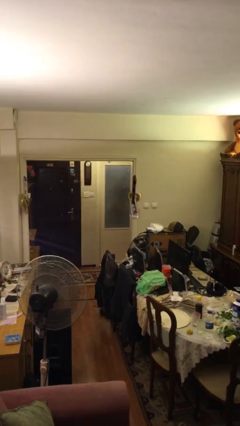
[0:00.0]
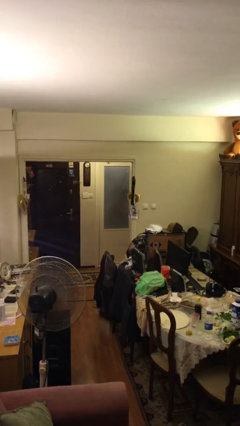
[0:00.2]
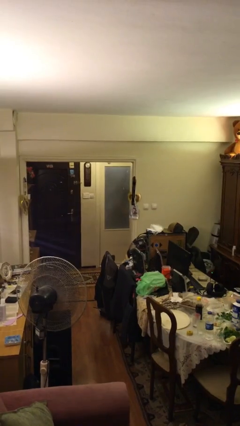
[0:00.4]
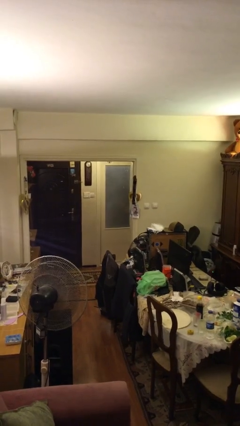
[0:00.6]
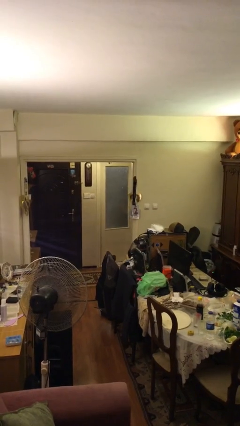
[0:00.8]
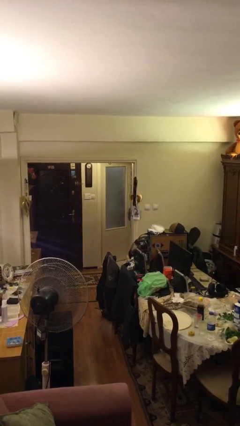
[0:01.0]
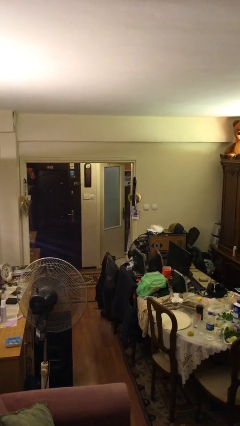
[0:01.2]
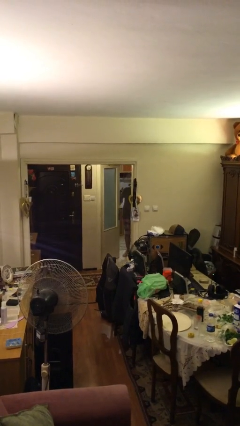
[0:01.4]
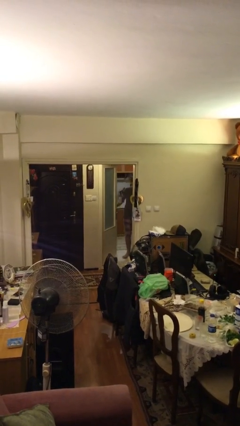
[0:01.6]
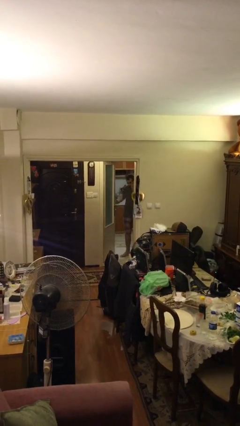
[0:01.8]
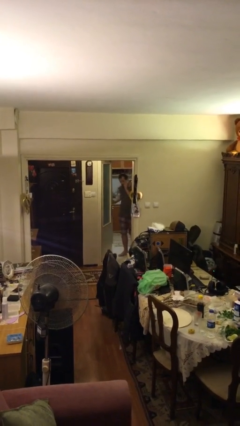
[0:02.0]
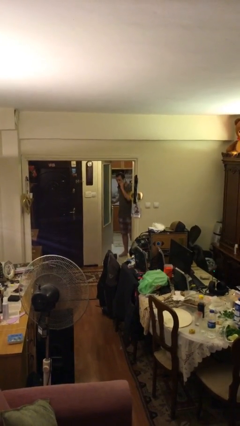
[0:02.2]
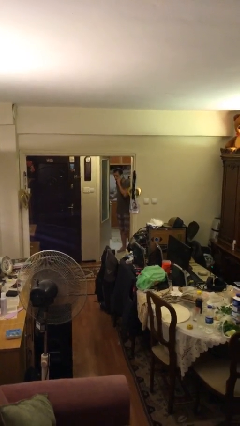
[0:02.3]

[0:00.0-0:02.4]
person opens facility door

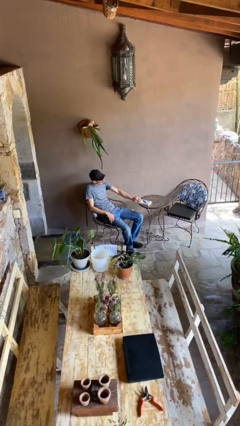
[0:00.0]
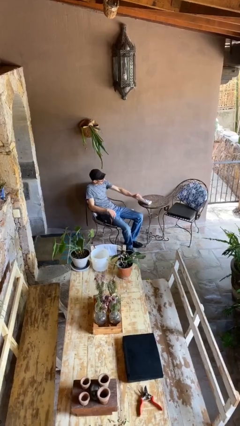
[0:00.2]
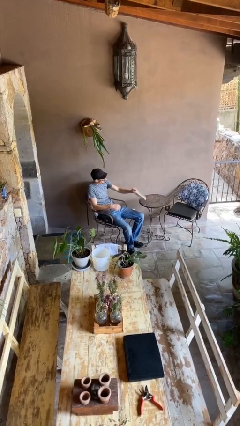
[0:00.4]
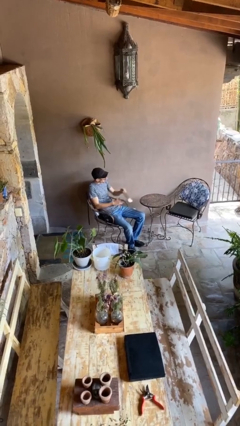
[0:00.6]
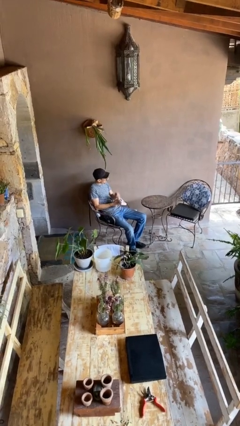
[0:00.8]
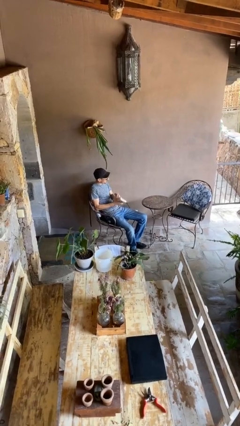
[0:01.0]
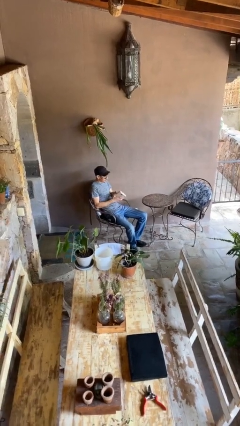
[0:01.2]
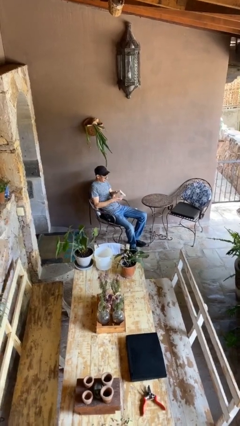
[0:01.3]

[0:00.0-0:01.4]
person picks up object from table

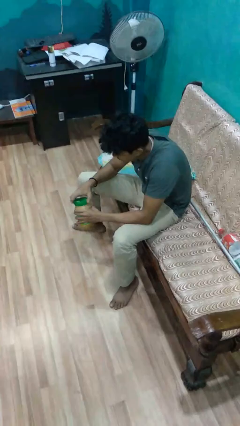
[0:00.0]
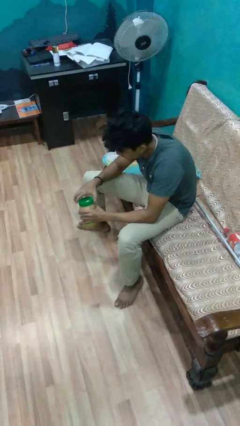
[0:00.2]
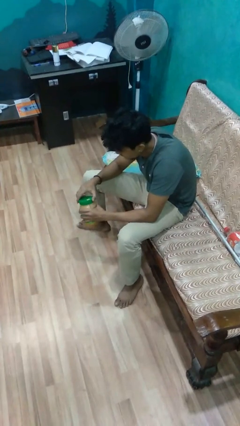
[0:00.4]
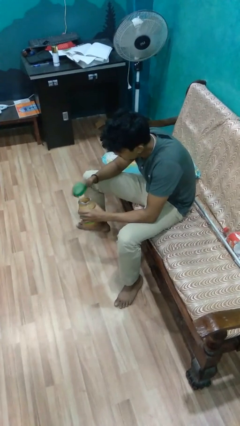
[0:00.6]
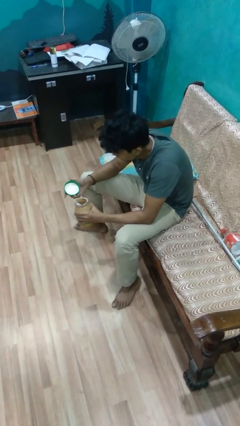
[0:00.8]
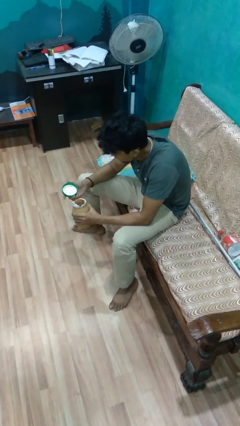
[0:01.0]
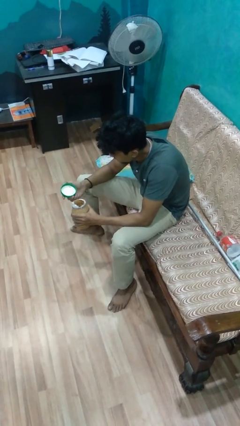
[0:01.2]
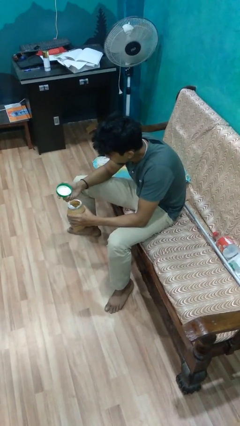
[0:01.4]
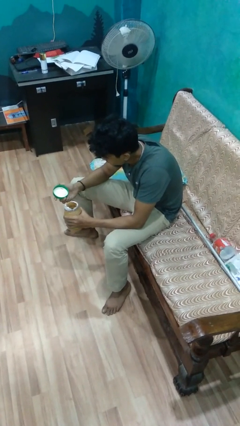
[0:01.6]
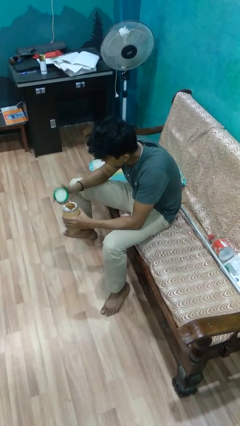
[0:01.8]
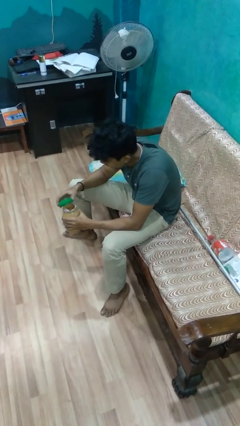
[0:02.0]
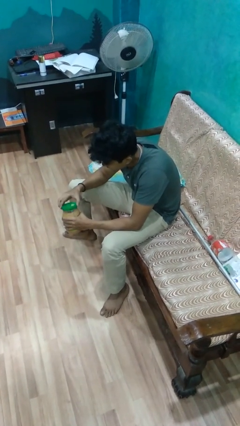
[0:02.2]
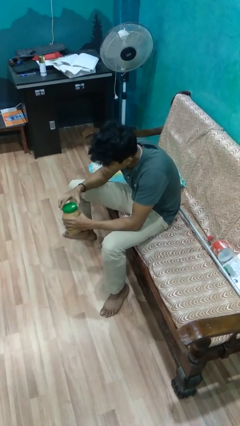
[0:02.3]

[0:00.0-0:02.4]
person opens jar

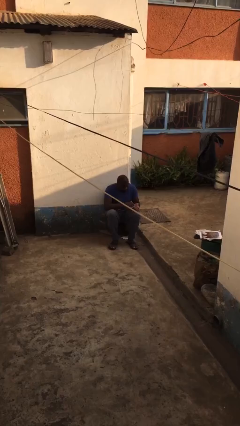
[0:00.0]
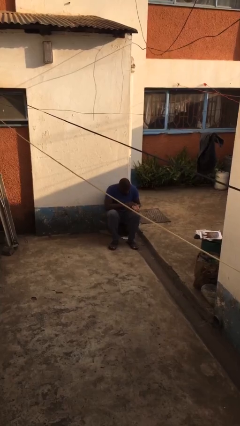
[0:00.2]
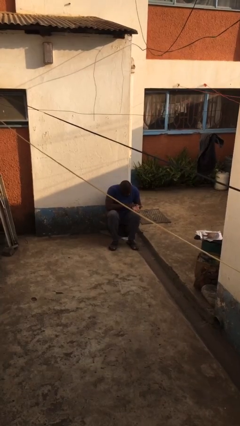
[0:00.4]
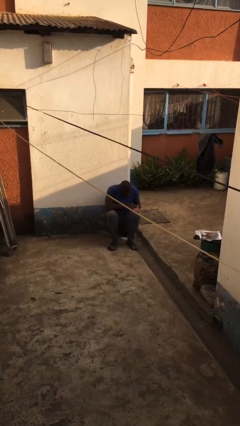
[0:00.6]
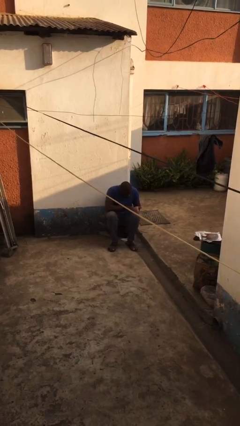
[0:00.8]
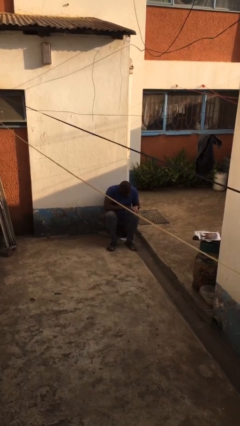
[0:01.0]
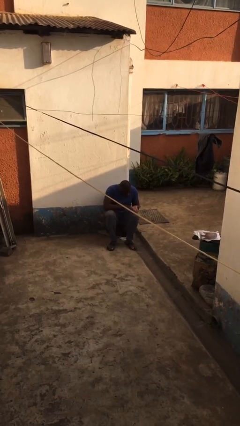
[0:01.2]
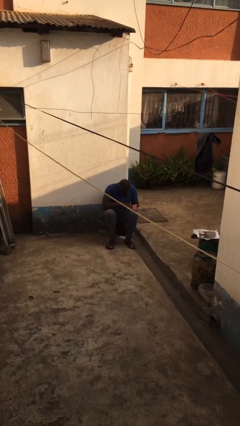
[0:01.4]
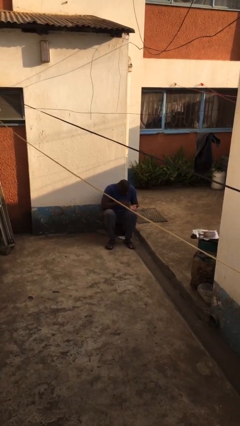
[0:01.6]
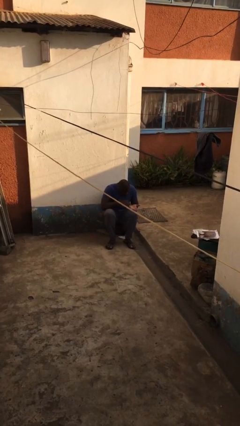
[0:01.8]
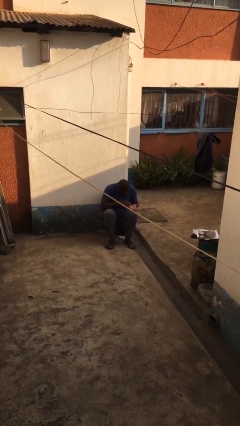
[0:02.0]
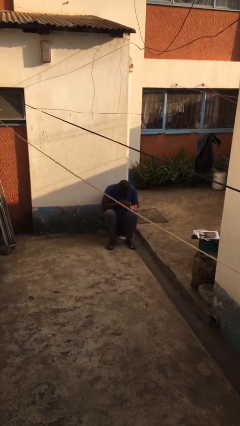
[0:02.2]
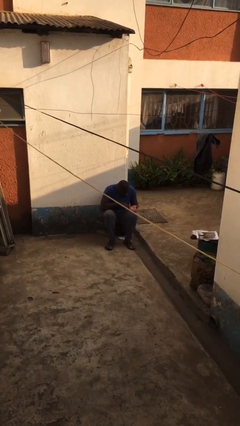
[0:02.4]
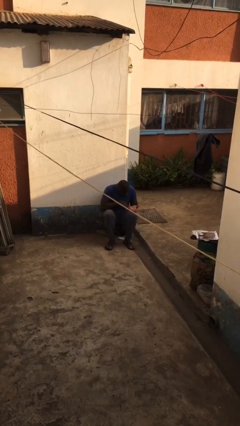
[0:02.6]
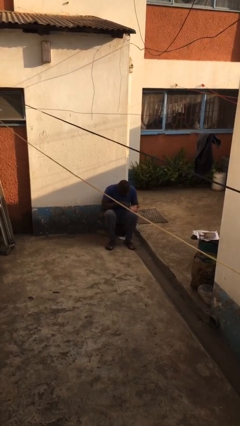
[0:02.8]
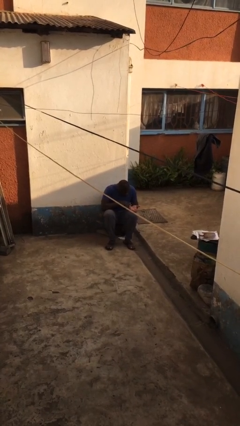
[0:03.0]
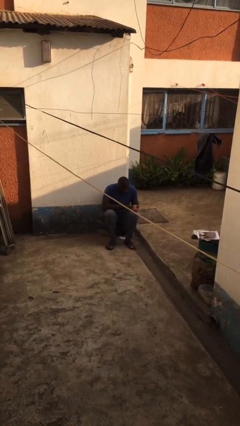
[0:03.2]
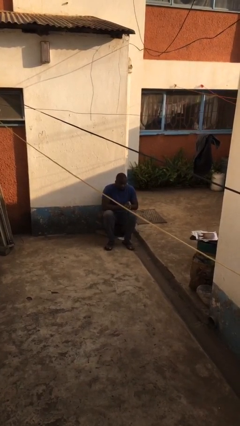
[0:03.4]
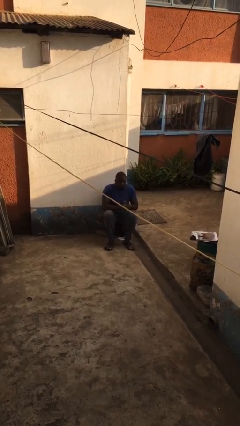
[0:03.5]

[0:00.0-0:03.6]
person looks at hands in lap

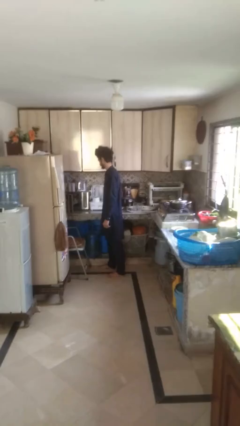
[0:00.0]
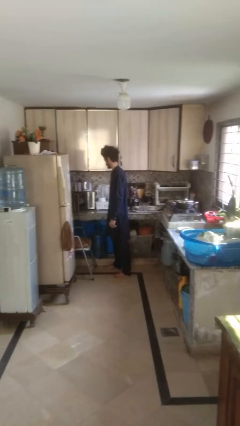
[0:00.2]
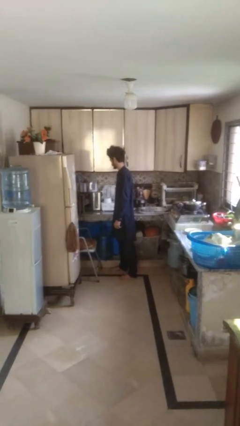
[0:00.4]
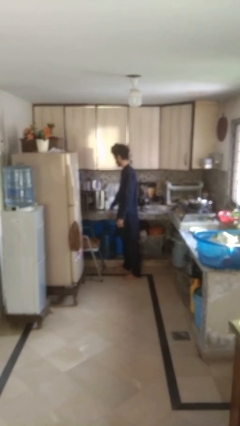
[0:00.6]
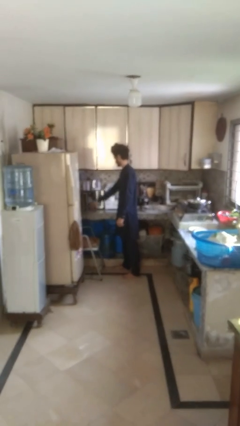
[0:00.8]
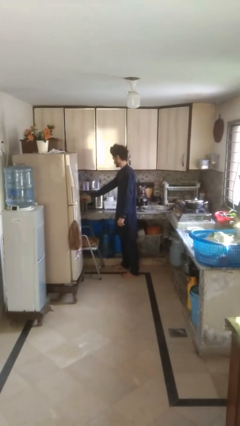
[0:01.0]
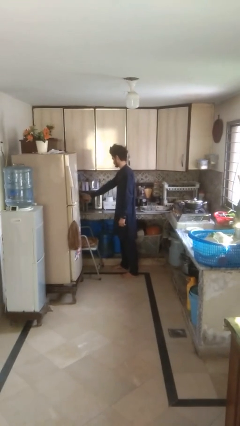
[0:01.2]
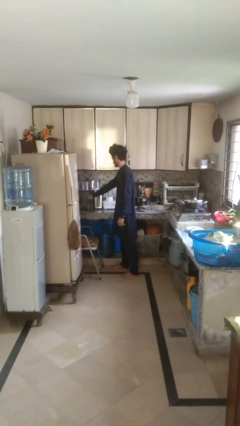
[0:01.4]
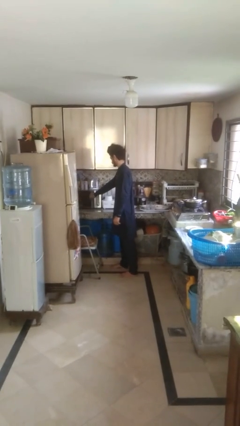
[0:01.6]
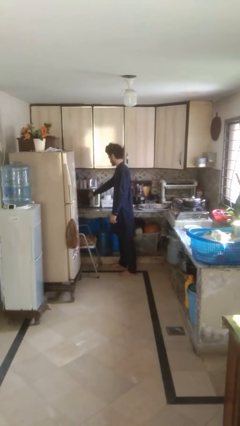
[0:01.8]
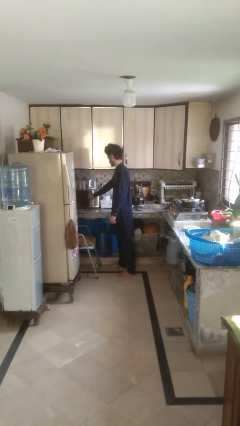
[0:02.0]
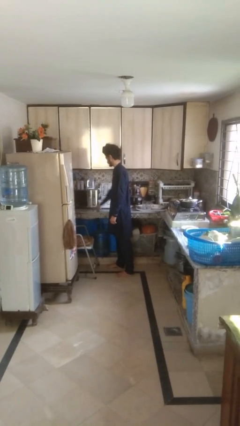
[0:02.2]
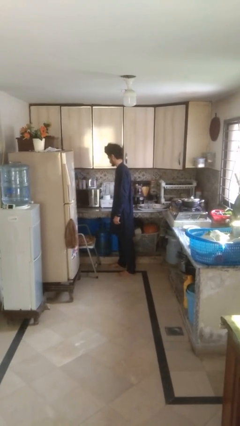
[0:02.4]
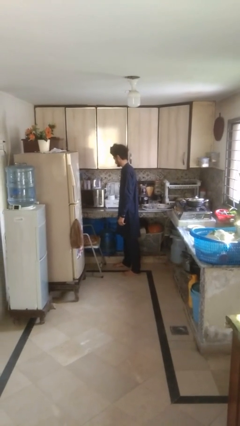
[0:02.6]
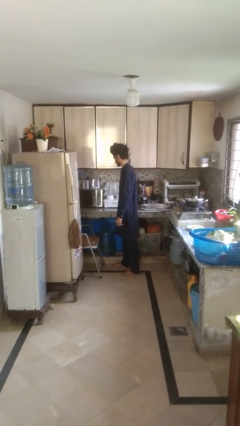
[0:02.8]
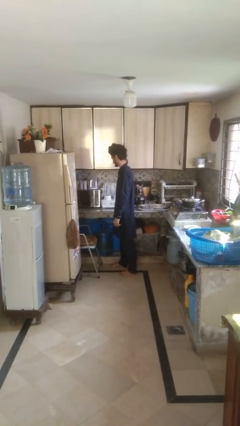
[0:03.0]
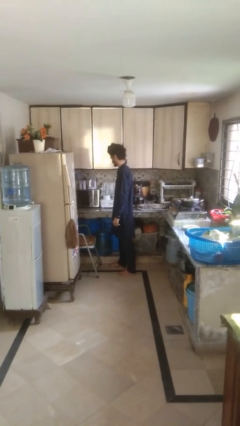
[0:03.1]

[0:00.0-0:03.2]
person closes oven door

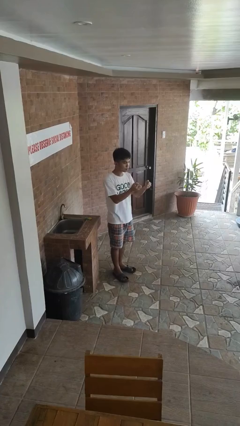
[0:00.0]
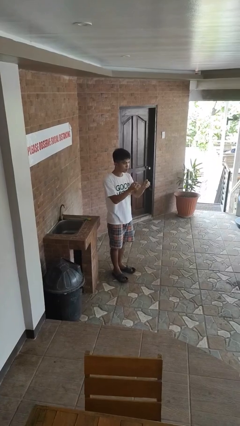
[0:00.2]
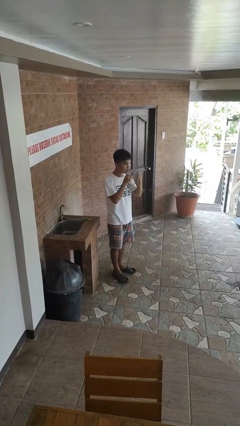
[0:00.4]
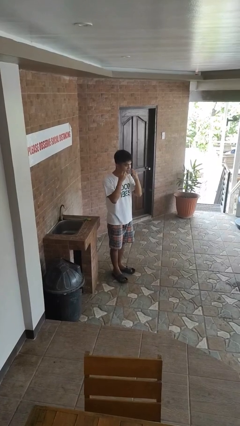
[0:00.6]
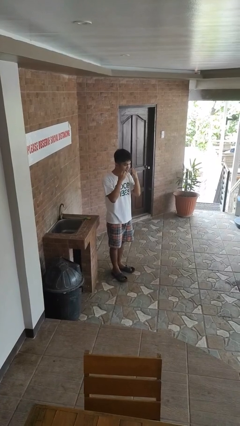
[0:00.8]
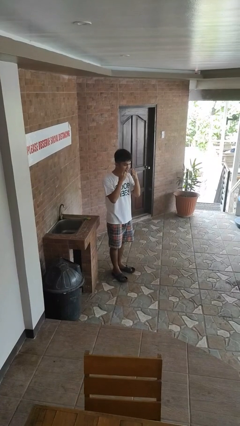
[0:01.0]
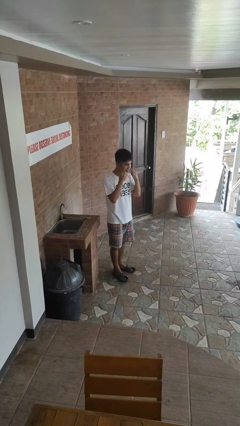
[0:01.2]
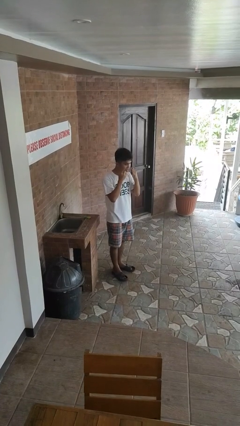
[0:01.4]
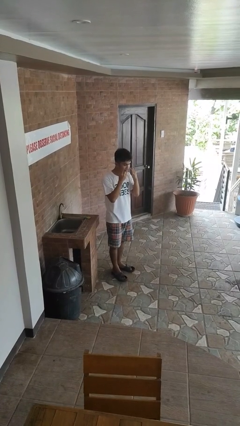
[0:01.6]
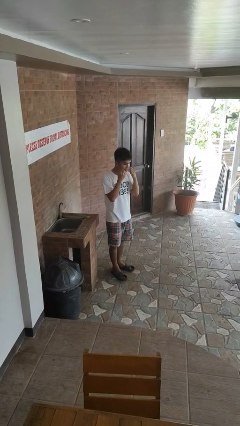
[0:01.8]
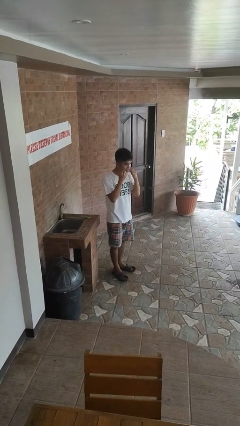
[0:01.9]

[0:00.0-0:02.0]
person flosses

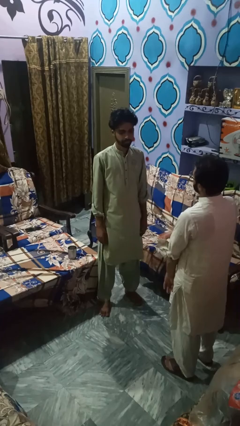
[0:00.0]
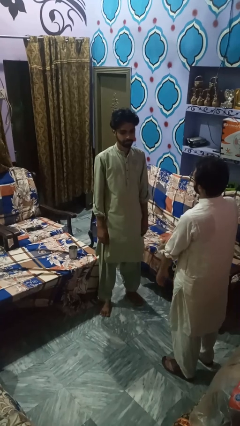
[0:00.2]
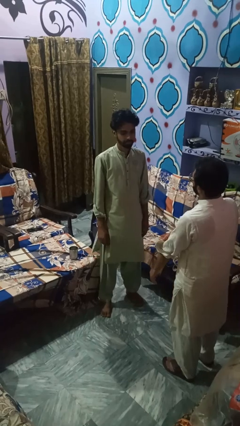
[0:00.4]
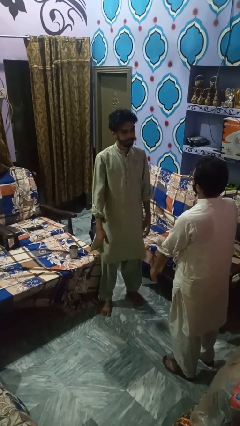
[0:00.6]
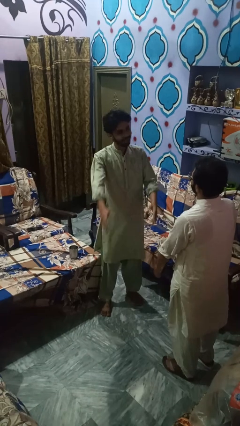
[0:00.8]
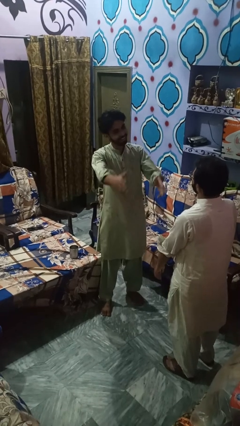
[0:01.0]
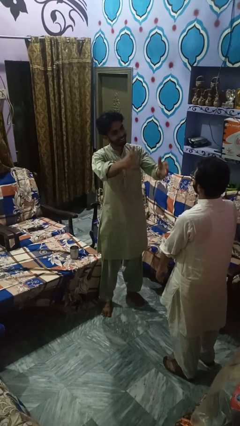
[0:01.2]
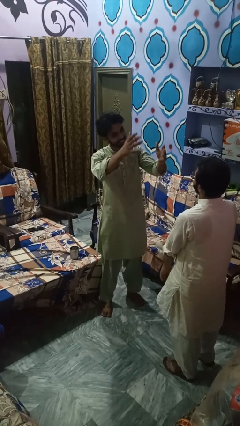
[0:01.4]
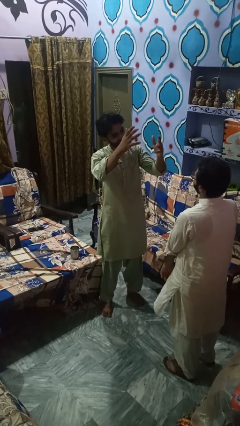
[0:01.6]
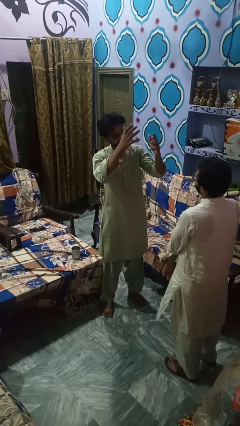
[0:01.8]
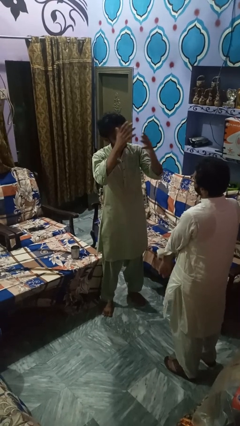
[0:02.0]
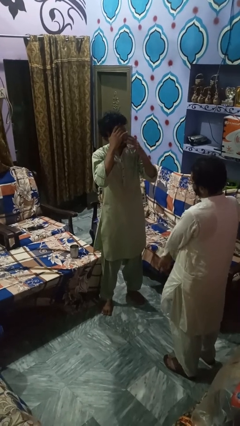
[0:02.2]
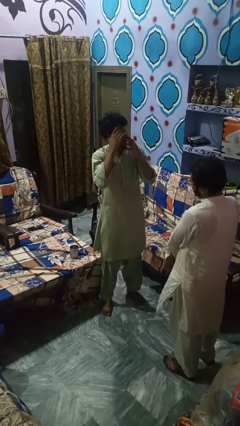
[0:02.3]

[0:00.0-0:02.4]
person laughs with person
